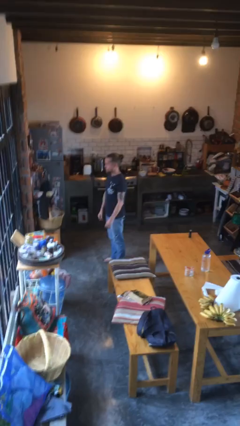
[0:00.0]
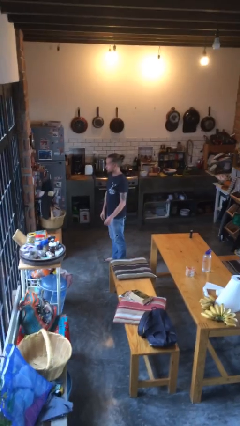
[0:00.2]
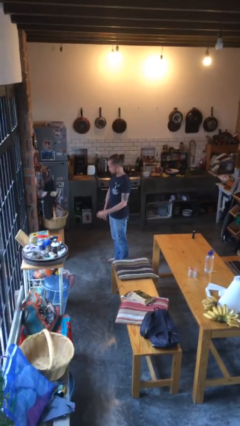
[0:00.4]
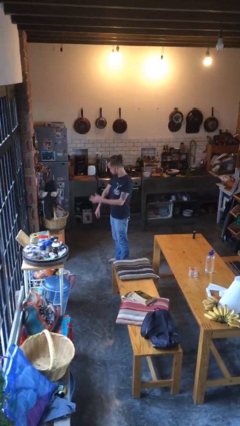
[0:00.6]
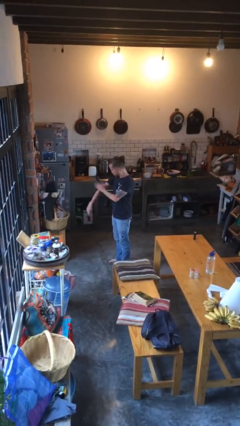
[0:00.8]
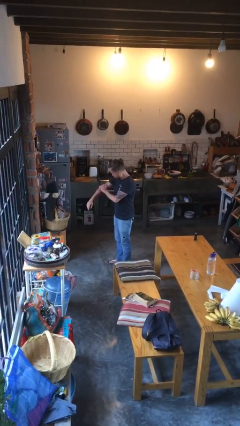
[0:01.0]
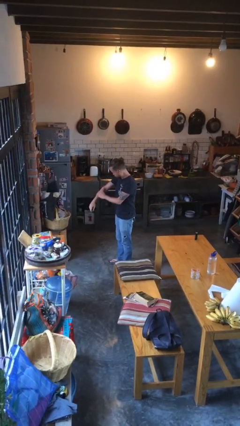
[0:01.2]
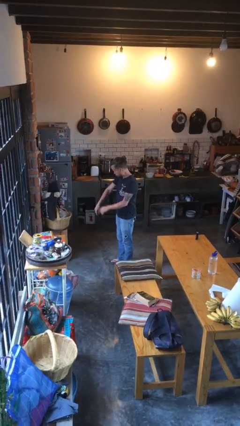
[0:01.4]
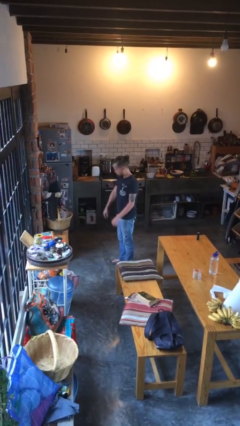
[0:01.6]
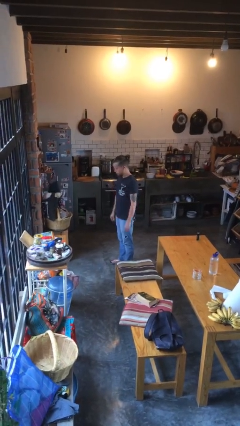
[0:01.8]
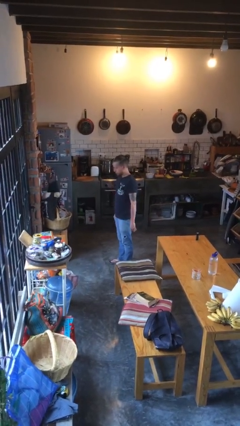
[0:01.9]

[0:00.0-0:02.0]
person swats bug

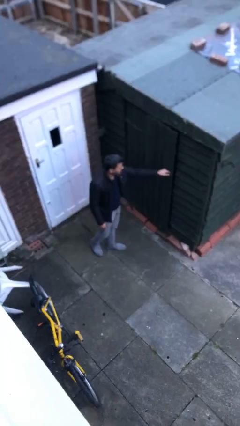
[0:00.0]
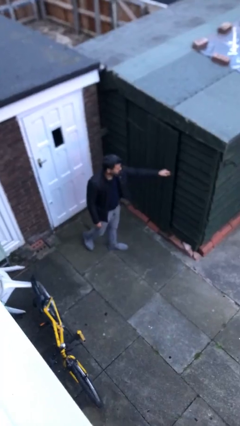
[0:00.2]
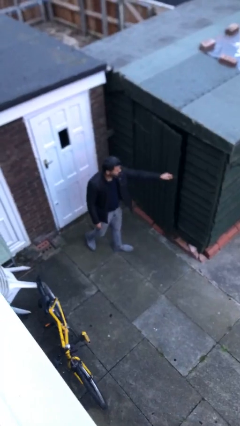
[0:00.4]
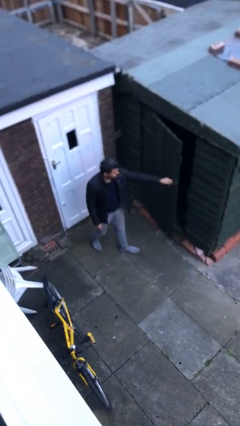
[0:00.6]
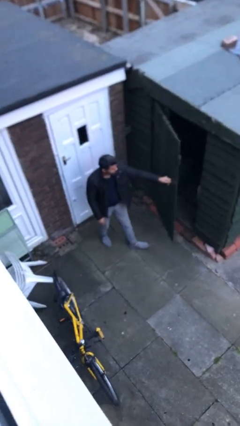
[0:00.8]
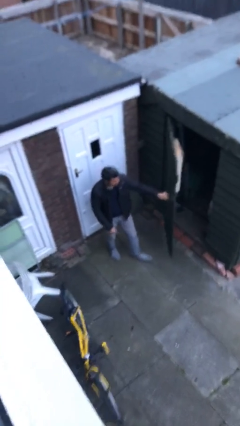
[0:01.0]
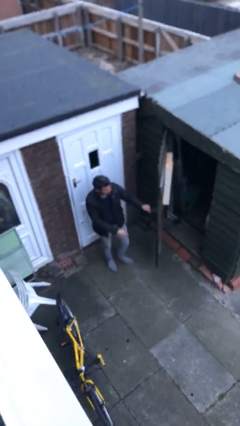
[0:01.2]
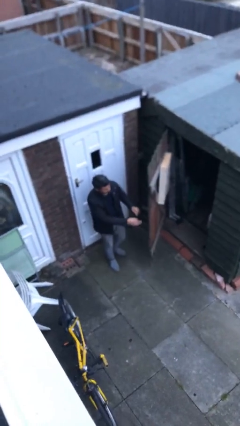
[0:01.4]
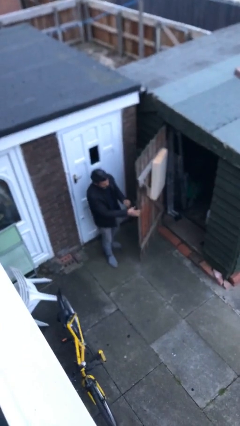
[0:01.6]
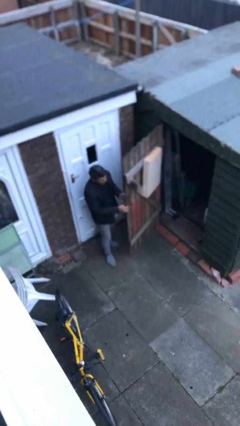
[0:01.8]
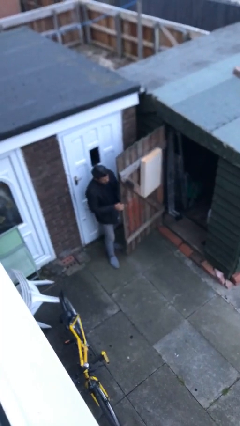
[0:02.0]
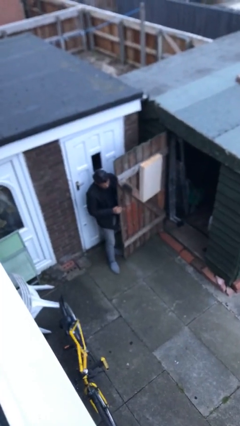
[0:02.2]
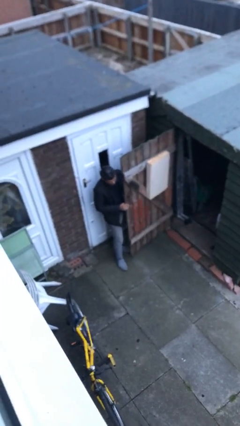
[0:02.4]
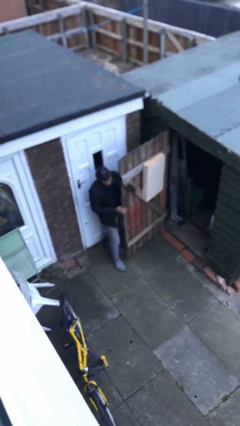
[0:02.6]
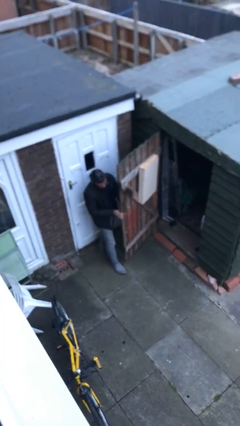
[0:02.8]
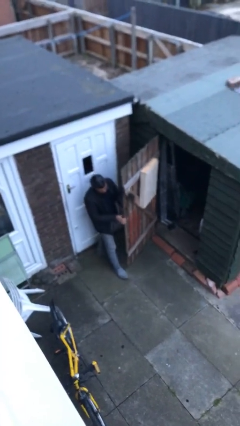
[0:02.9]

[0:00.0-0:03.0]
person opens facility door

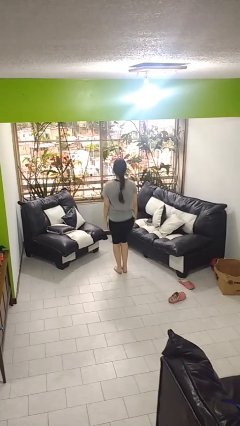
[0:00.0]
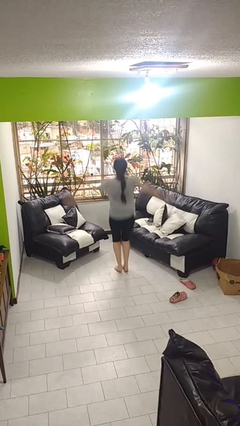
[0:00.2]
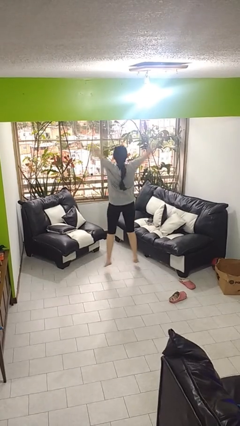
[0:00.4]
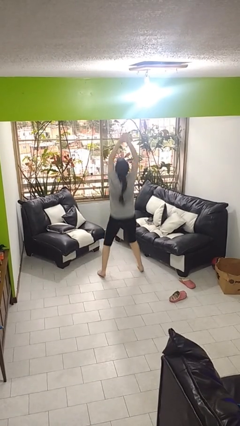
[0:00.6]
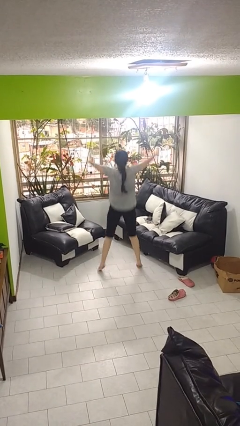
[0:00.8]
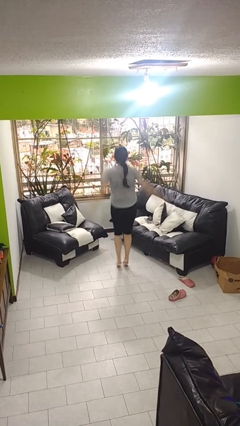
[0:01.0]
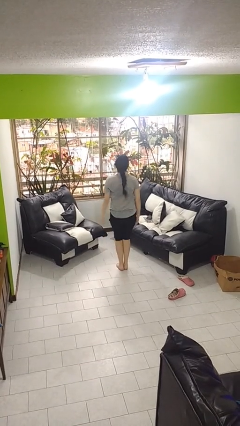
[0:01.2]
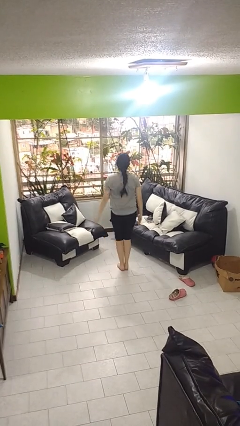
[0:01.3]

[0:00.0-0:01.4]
person exercises with jumping jacks

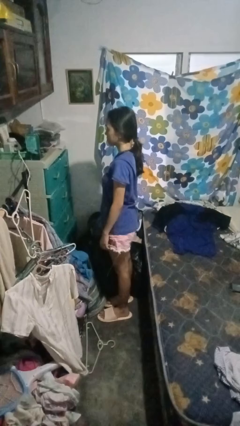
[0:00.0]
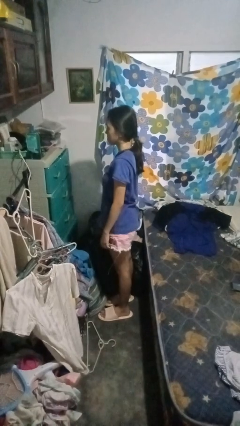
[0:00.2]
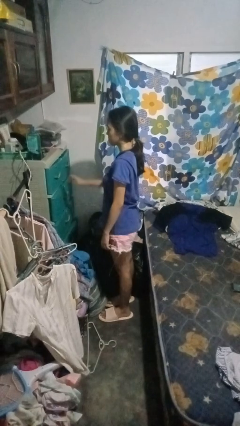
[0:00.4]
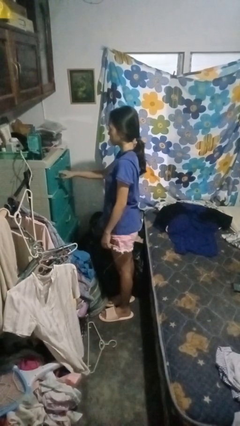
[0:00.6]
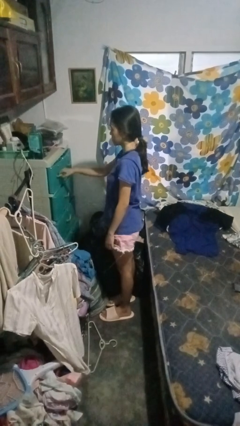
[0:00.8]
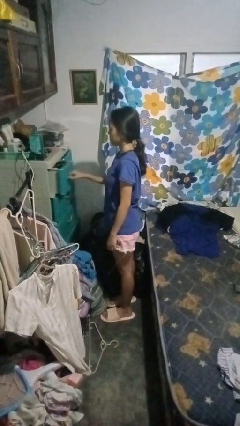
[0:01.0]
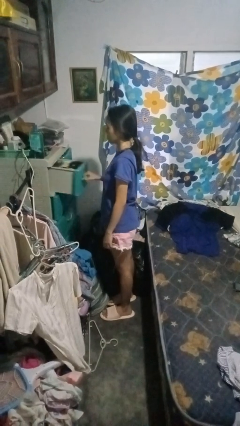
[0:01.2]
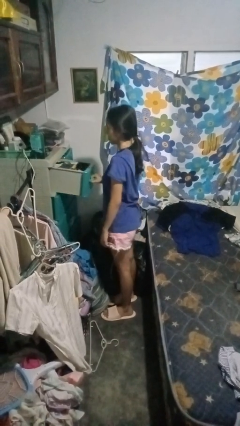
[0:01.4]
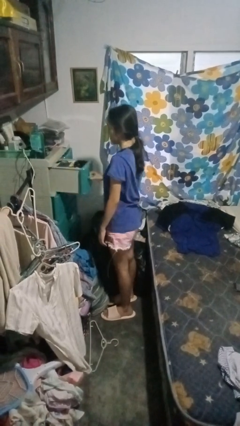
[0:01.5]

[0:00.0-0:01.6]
person opens dresser drawer

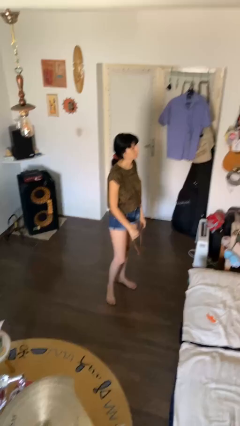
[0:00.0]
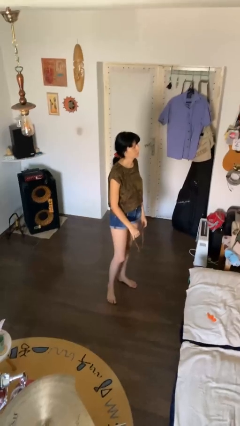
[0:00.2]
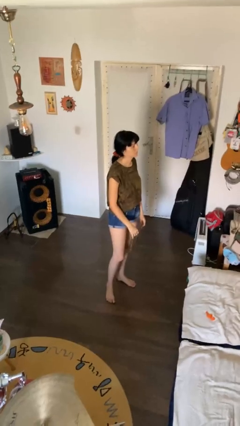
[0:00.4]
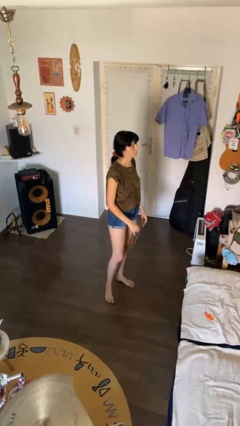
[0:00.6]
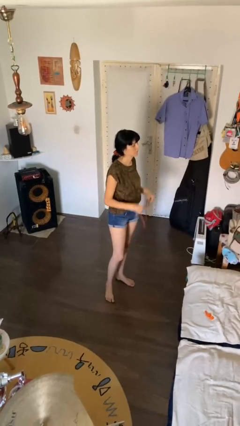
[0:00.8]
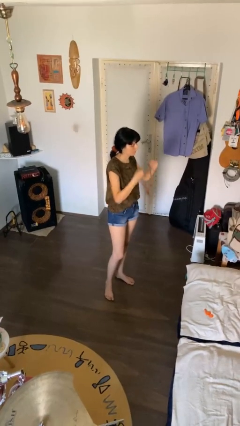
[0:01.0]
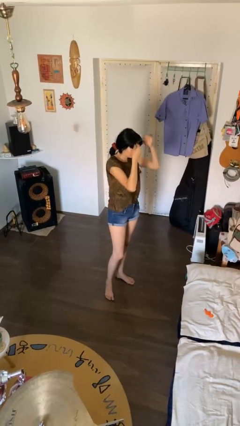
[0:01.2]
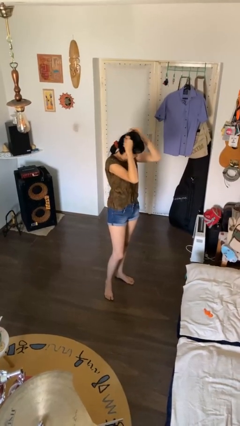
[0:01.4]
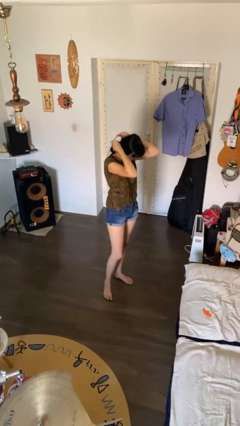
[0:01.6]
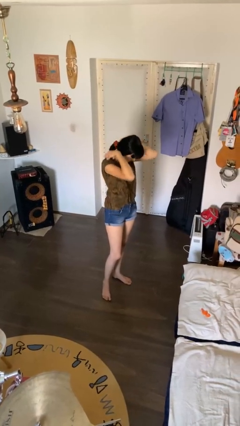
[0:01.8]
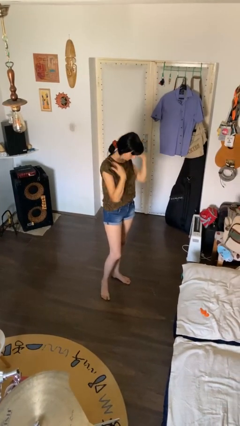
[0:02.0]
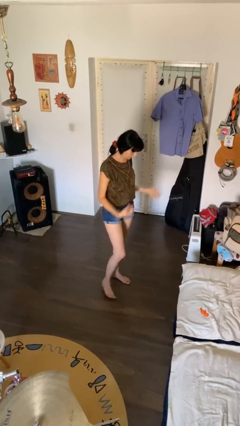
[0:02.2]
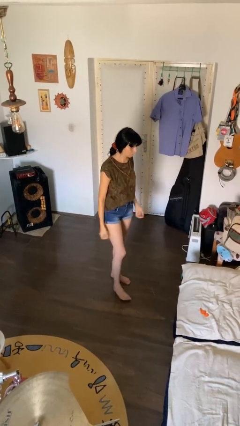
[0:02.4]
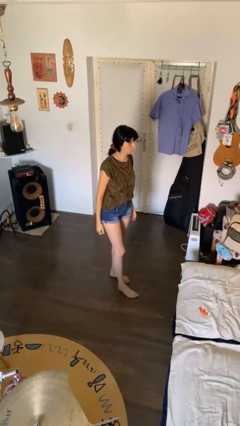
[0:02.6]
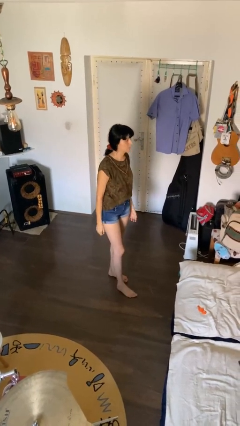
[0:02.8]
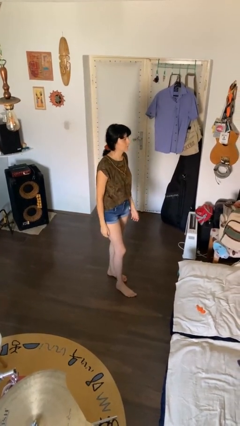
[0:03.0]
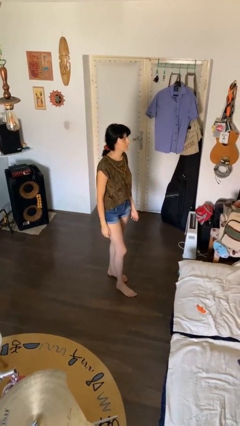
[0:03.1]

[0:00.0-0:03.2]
person puts on necklace

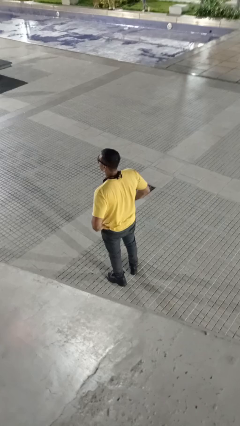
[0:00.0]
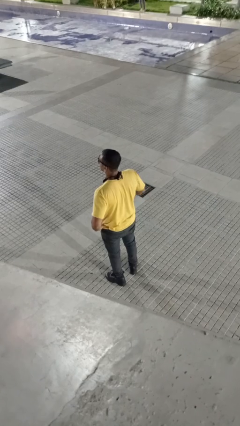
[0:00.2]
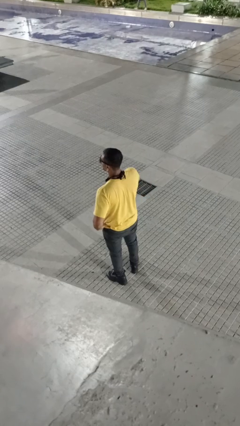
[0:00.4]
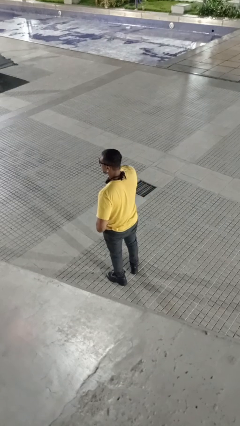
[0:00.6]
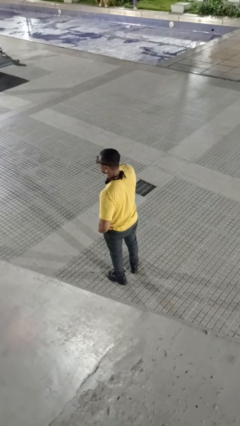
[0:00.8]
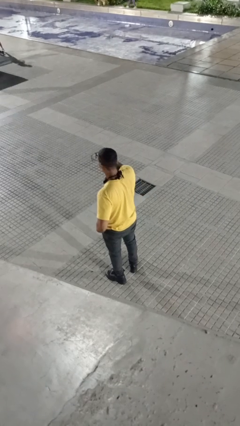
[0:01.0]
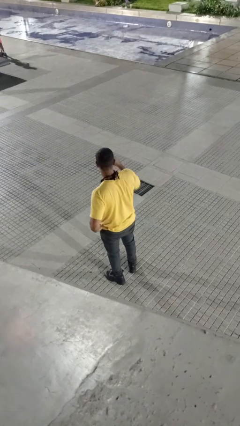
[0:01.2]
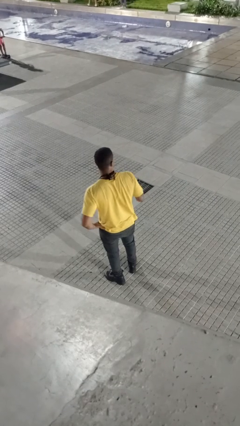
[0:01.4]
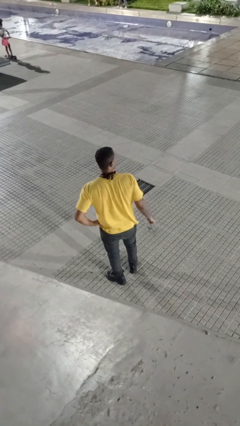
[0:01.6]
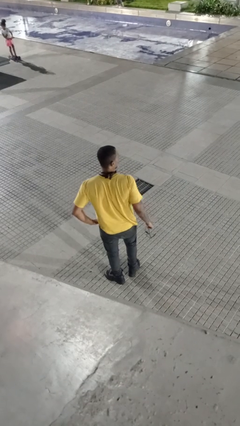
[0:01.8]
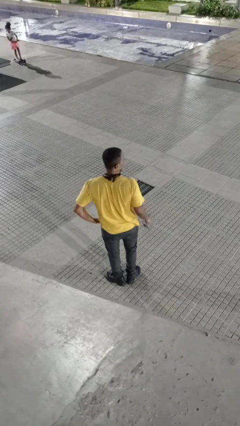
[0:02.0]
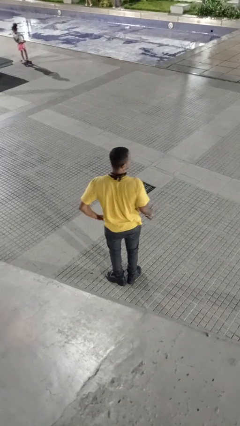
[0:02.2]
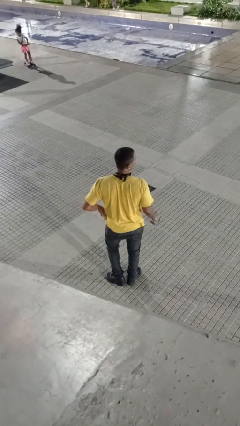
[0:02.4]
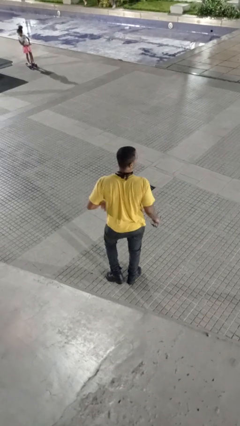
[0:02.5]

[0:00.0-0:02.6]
person takes off glasses

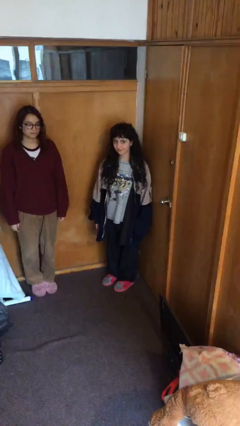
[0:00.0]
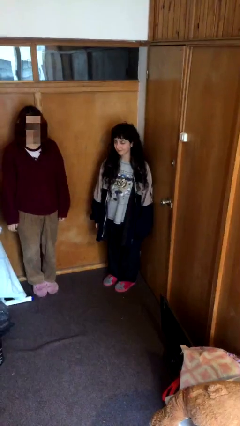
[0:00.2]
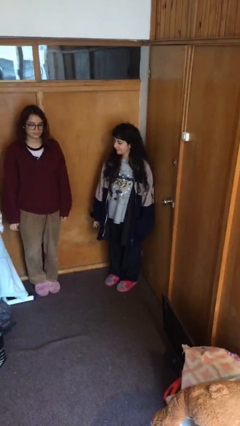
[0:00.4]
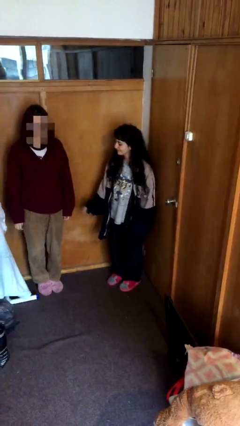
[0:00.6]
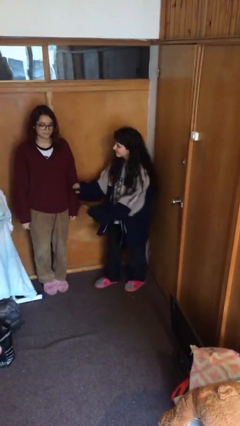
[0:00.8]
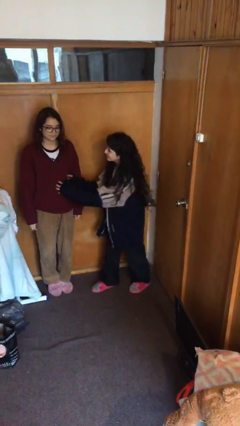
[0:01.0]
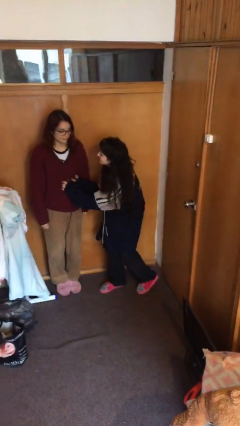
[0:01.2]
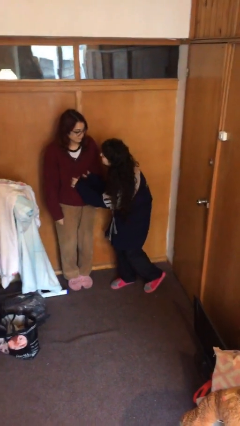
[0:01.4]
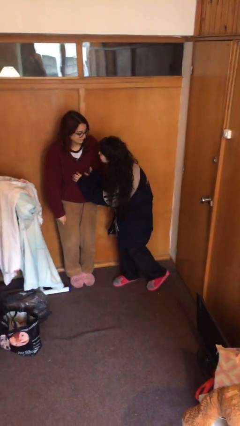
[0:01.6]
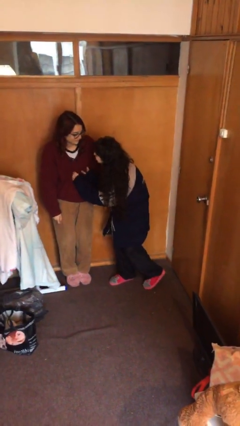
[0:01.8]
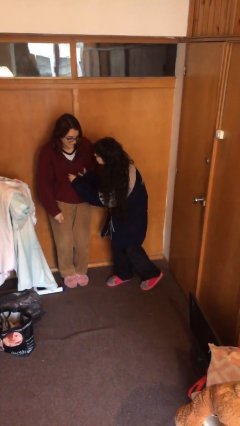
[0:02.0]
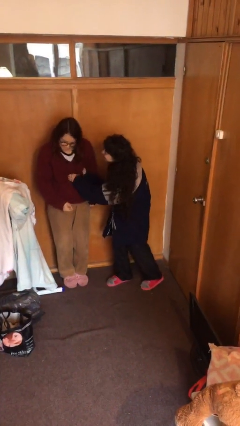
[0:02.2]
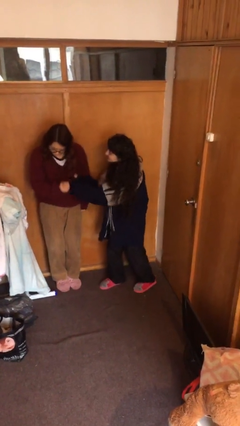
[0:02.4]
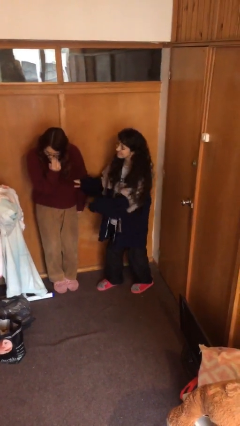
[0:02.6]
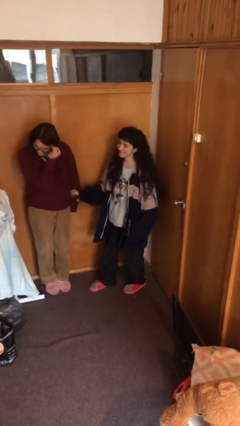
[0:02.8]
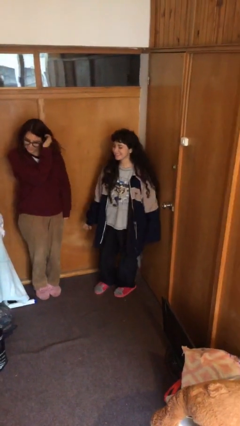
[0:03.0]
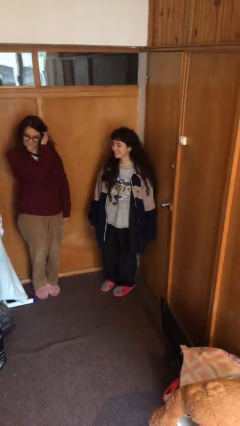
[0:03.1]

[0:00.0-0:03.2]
person tickles person
